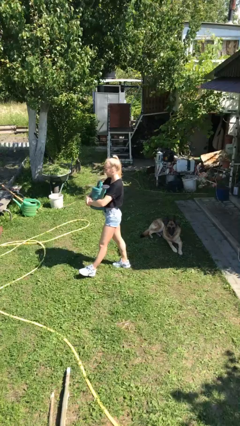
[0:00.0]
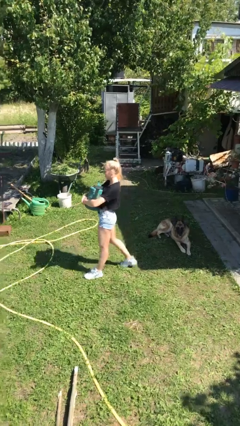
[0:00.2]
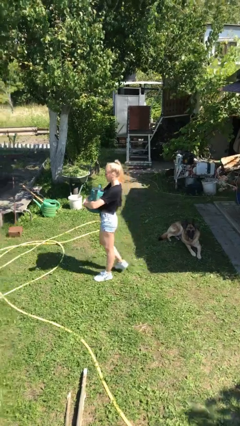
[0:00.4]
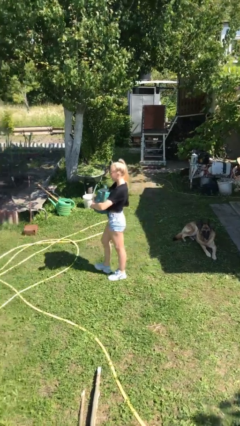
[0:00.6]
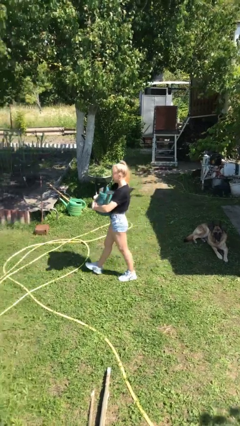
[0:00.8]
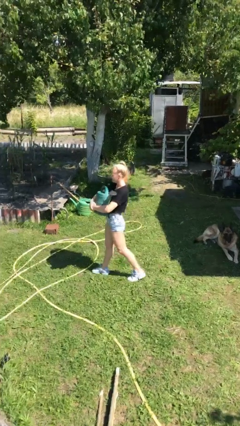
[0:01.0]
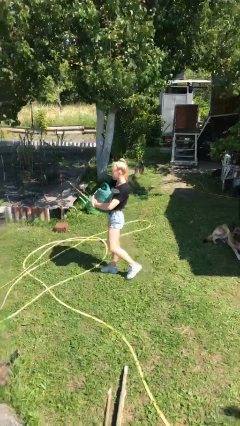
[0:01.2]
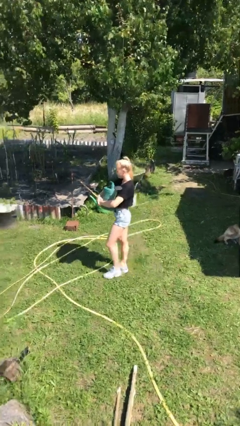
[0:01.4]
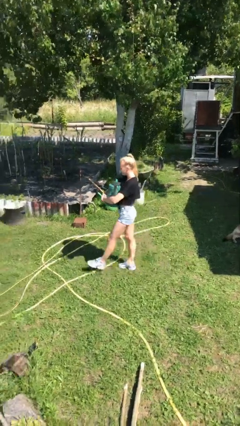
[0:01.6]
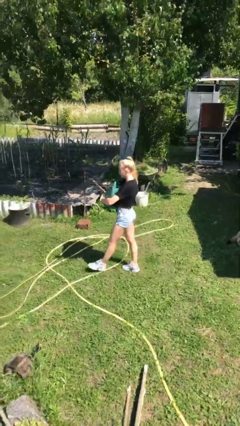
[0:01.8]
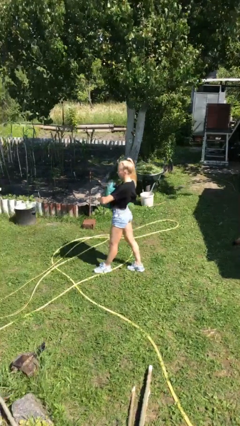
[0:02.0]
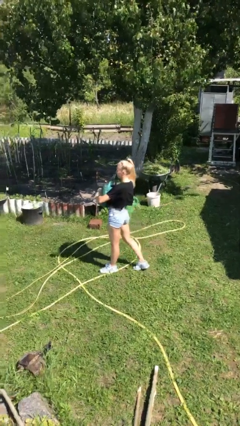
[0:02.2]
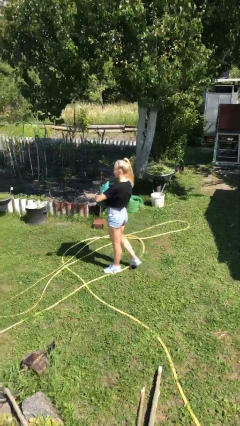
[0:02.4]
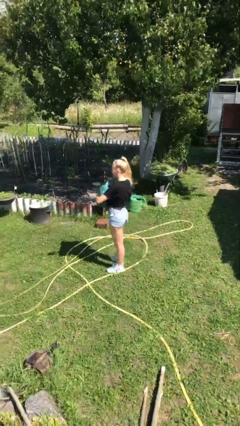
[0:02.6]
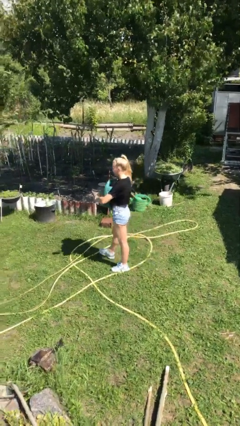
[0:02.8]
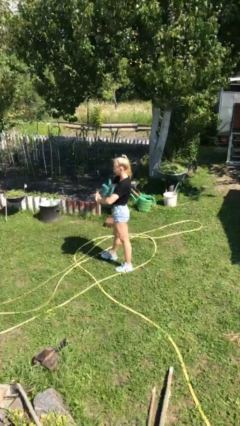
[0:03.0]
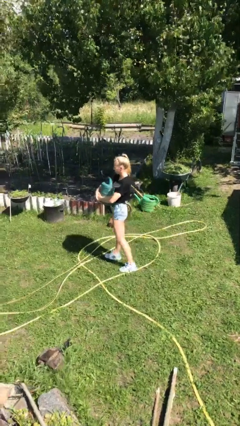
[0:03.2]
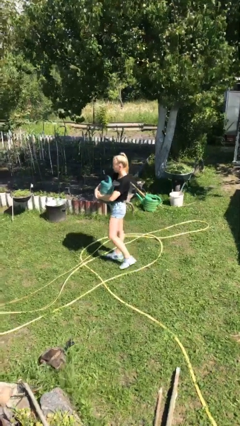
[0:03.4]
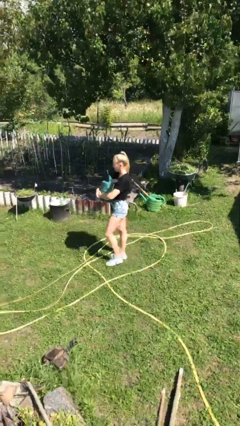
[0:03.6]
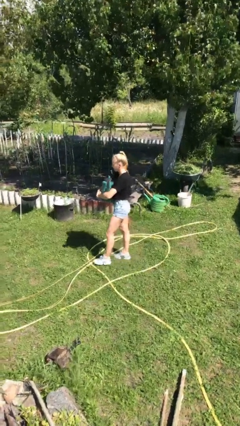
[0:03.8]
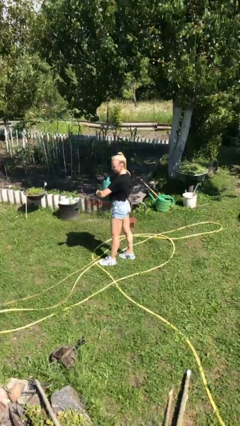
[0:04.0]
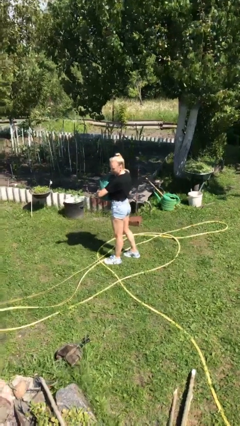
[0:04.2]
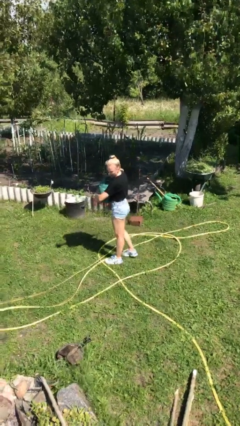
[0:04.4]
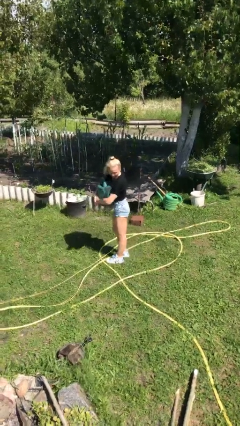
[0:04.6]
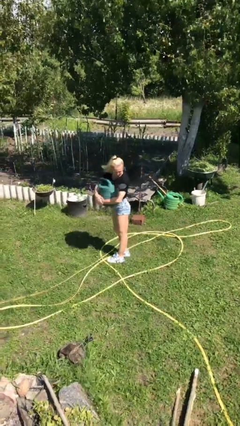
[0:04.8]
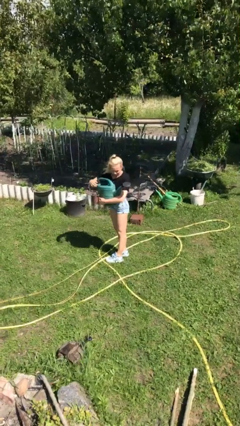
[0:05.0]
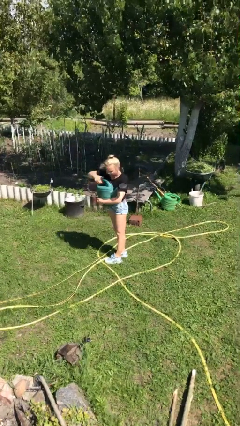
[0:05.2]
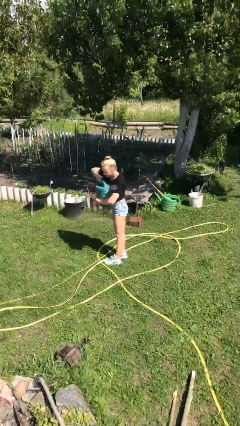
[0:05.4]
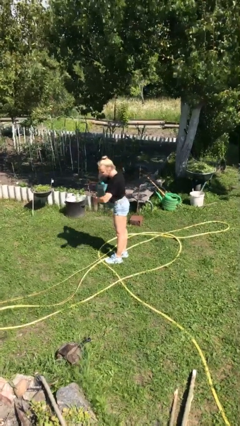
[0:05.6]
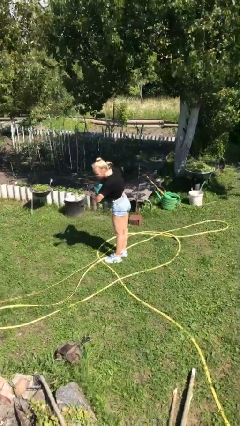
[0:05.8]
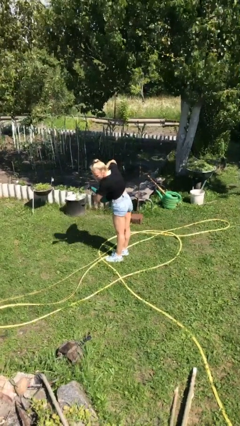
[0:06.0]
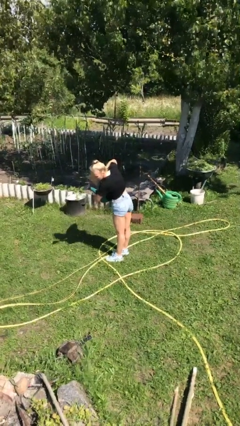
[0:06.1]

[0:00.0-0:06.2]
person carries heavy object

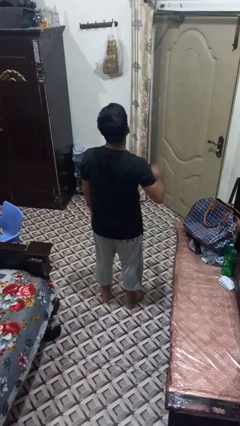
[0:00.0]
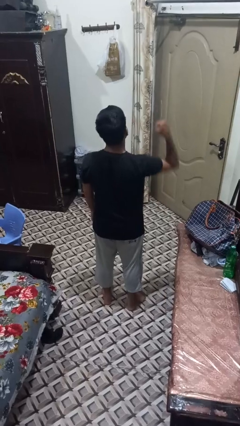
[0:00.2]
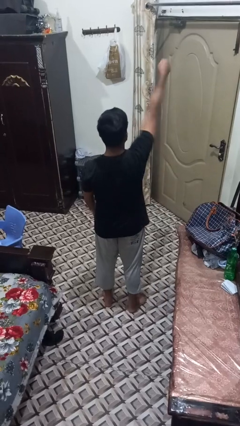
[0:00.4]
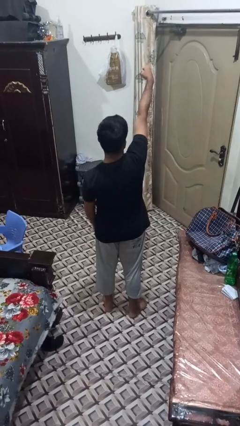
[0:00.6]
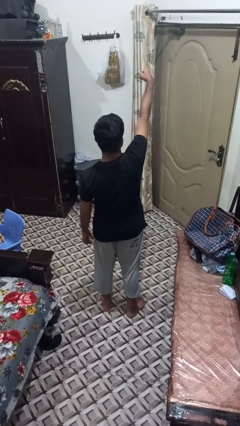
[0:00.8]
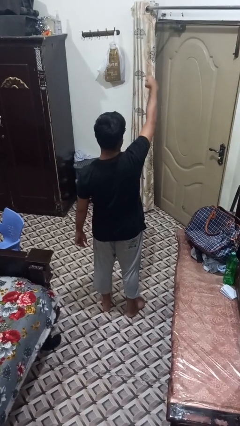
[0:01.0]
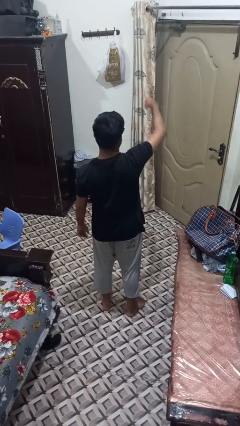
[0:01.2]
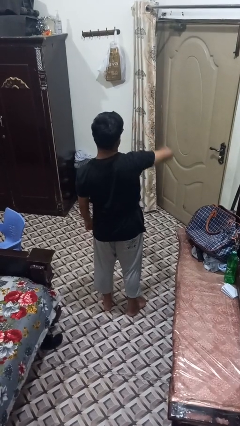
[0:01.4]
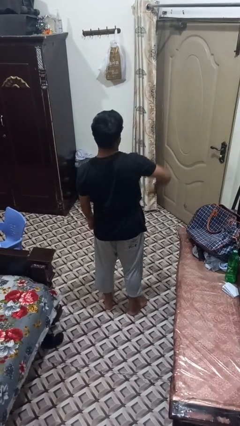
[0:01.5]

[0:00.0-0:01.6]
person punches

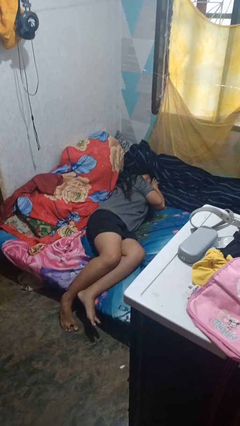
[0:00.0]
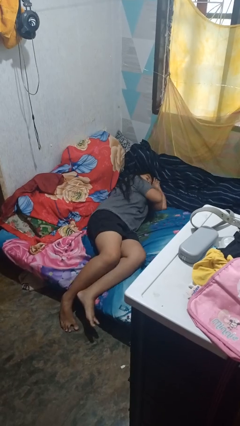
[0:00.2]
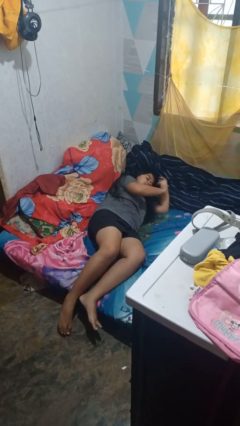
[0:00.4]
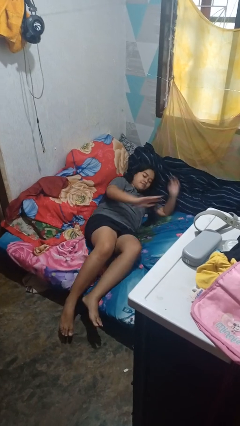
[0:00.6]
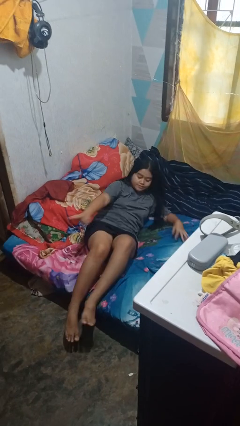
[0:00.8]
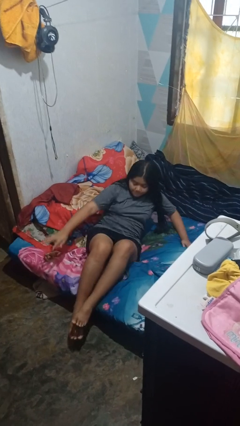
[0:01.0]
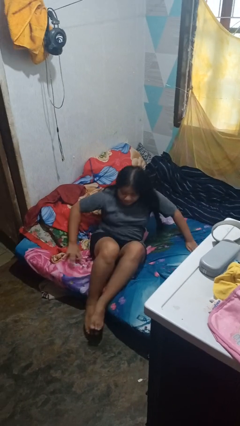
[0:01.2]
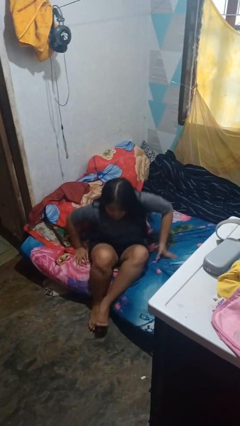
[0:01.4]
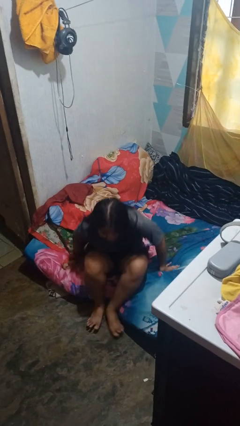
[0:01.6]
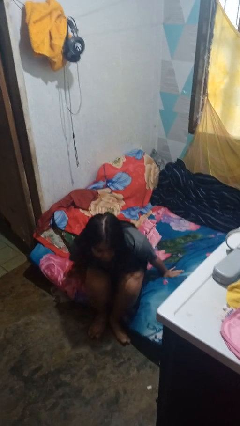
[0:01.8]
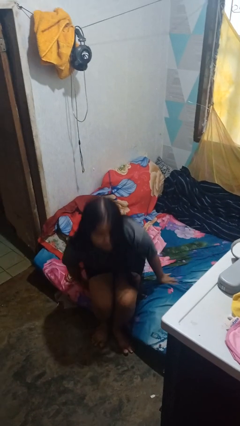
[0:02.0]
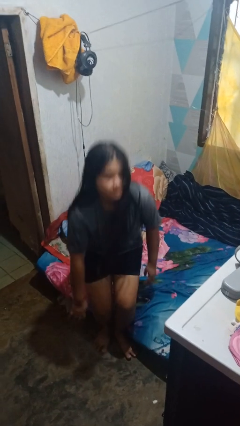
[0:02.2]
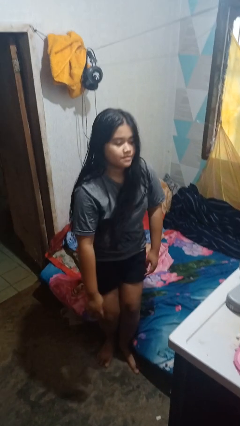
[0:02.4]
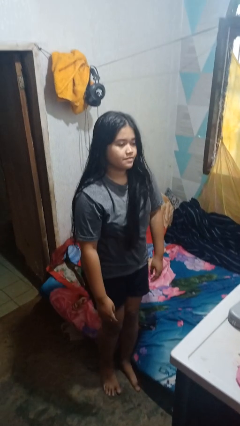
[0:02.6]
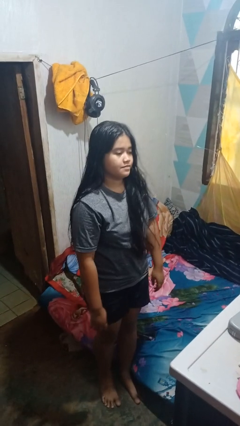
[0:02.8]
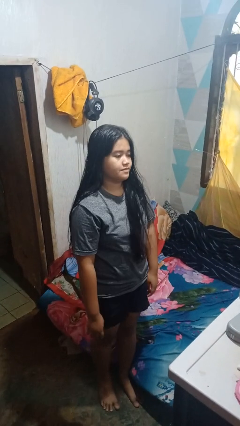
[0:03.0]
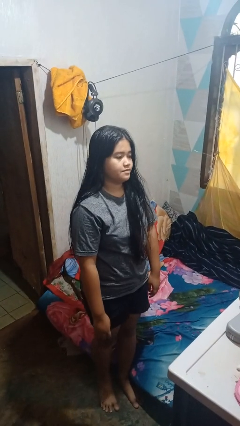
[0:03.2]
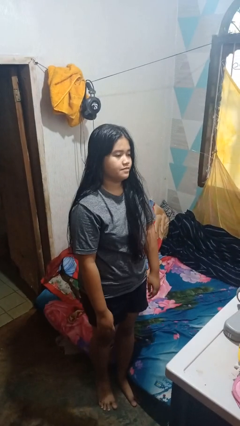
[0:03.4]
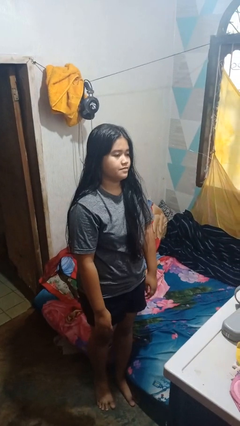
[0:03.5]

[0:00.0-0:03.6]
person stands up

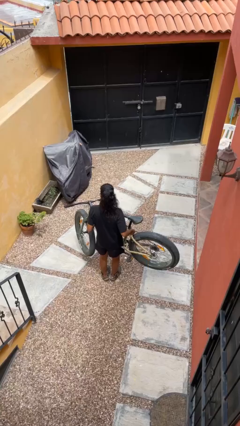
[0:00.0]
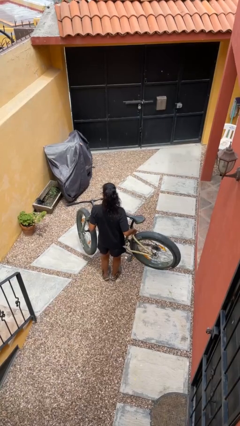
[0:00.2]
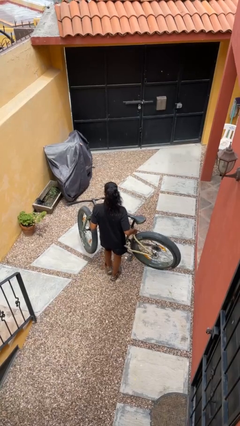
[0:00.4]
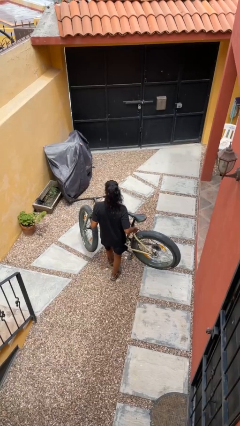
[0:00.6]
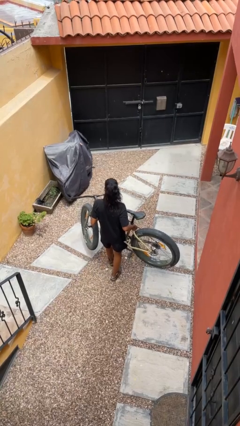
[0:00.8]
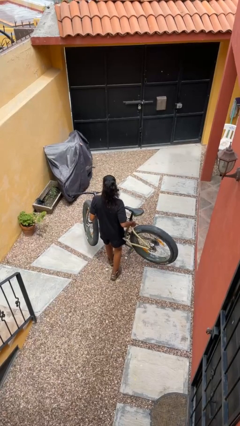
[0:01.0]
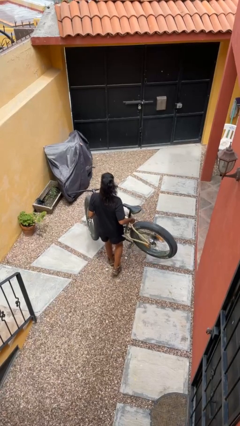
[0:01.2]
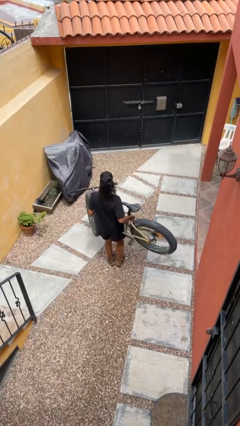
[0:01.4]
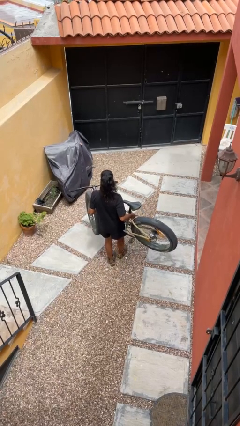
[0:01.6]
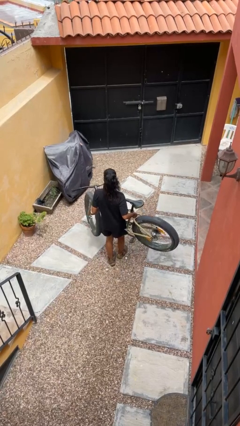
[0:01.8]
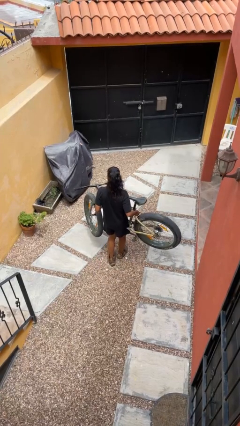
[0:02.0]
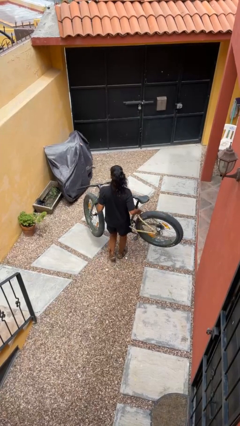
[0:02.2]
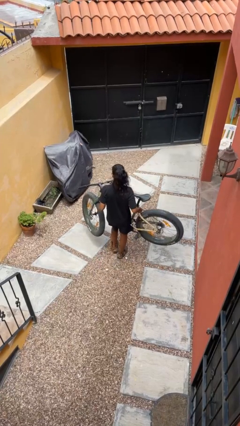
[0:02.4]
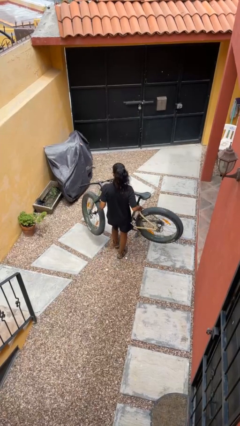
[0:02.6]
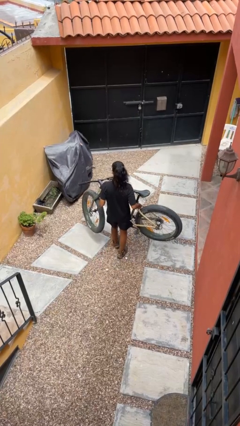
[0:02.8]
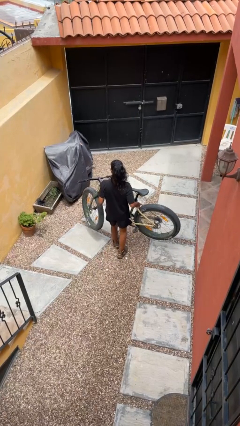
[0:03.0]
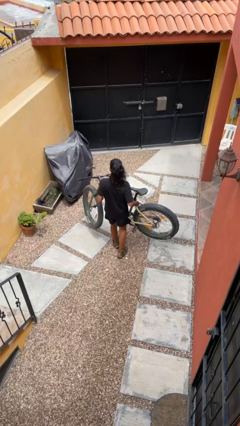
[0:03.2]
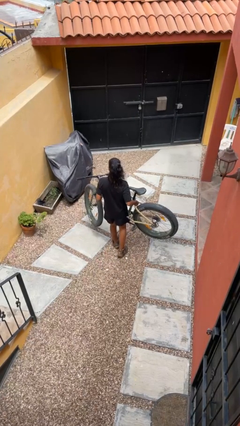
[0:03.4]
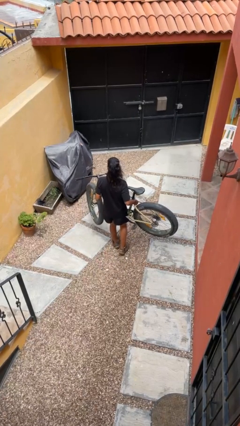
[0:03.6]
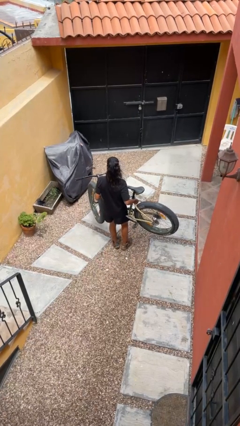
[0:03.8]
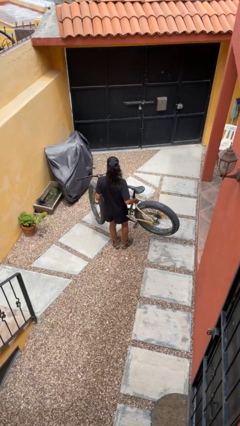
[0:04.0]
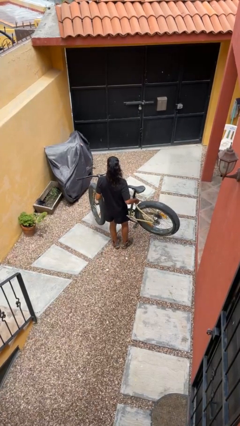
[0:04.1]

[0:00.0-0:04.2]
person carries bicycle

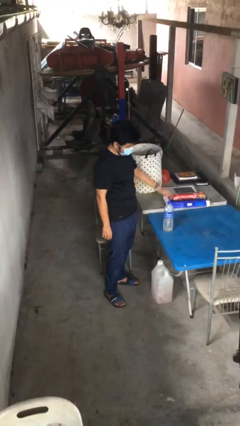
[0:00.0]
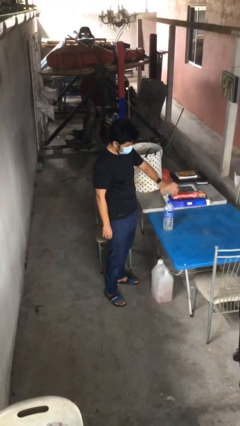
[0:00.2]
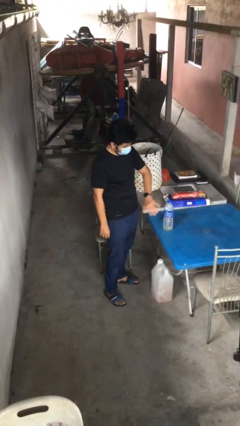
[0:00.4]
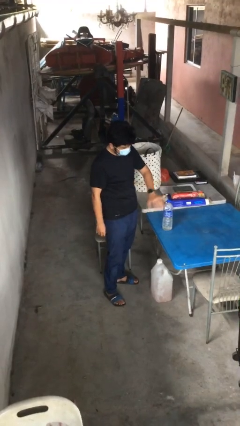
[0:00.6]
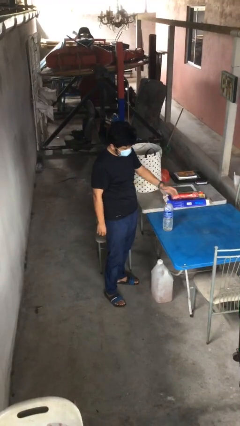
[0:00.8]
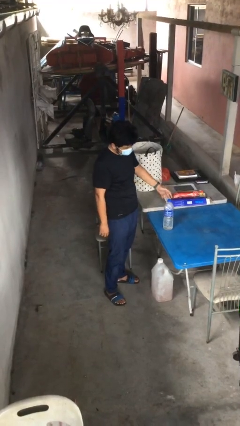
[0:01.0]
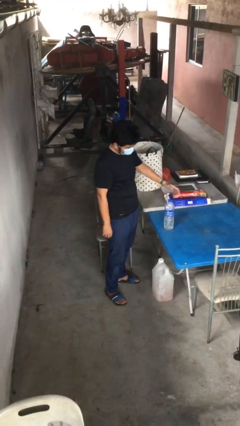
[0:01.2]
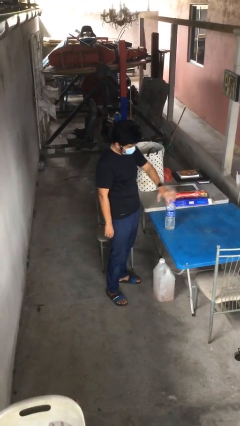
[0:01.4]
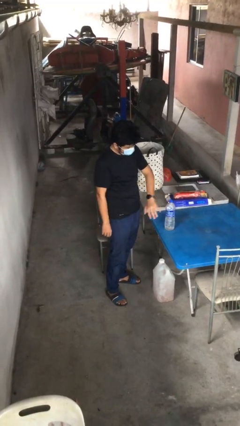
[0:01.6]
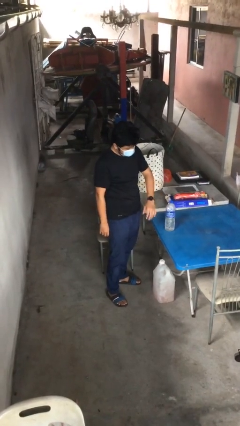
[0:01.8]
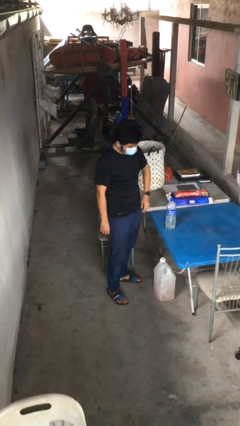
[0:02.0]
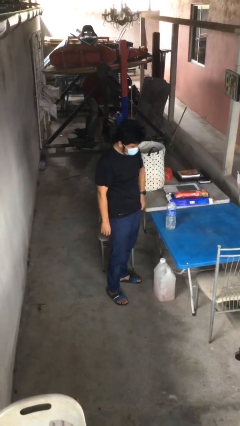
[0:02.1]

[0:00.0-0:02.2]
person waves hand over object
